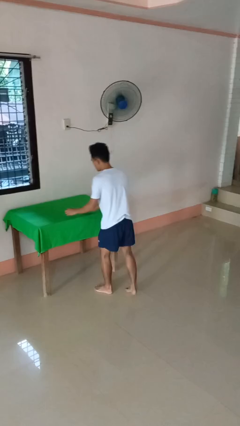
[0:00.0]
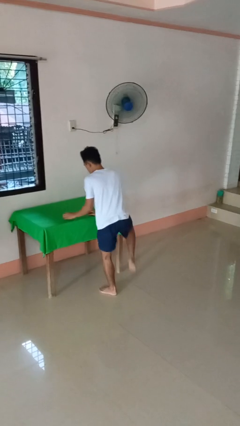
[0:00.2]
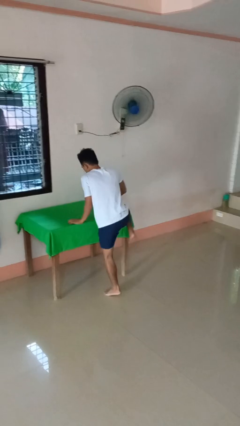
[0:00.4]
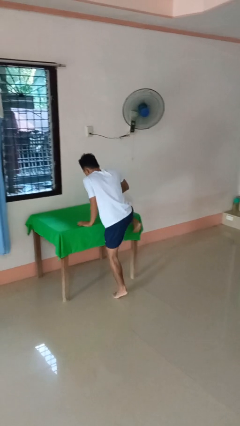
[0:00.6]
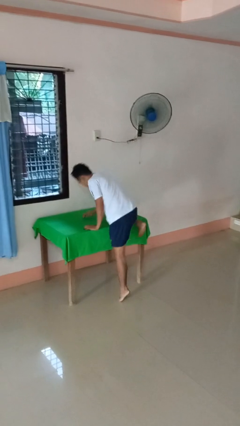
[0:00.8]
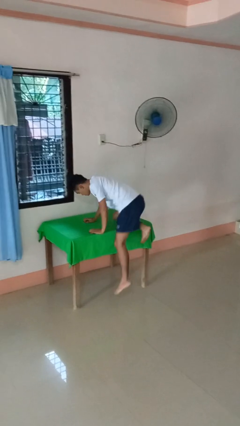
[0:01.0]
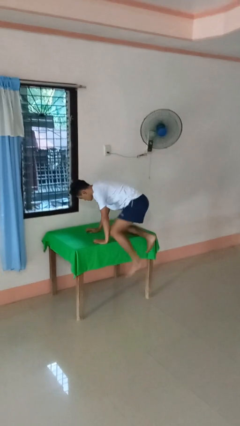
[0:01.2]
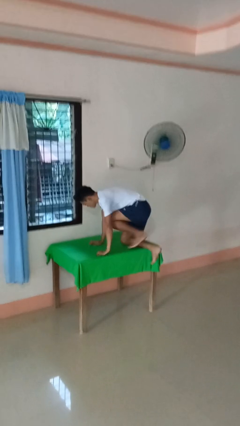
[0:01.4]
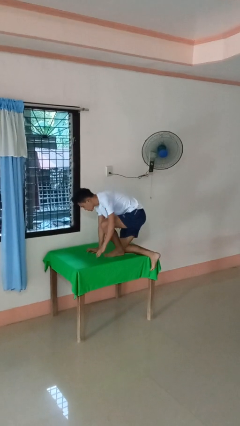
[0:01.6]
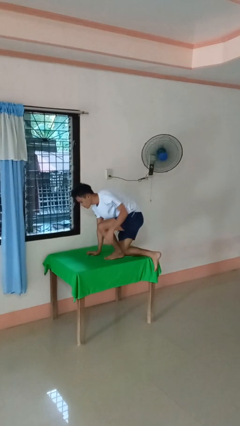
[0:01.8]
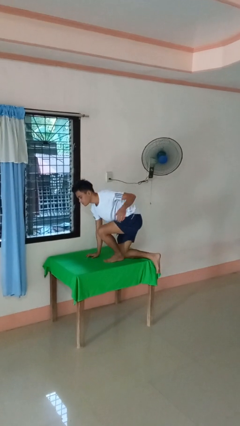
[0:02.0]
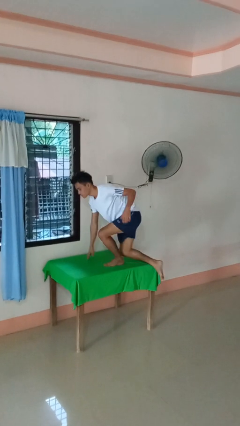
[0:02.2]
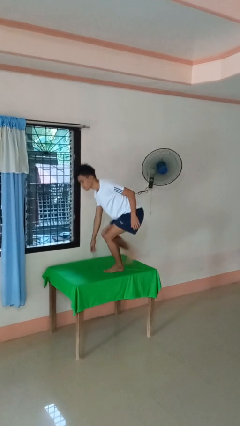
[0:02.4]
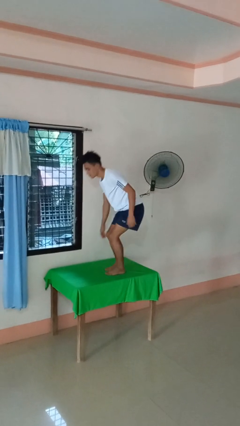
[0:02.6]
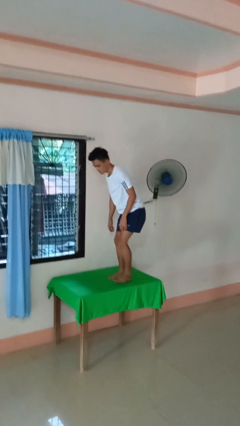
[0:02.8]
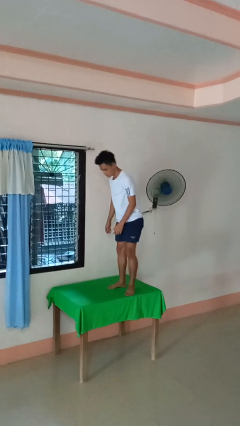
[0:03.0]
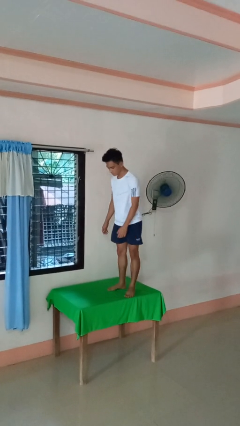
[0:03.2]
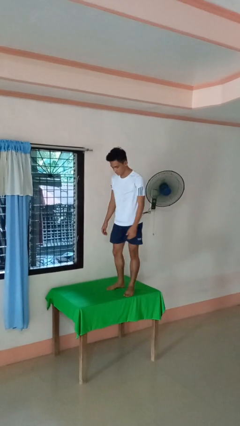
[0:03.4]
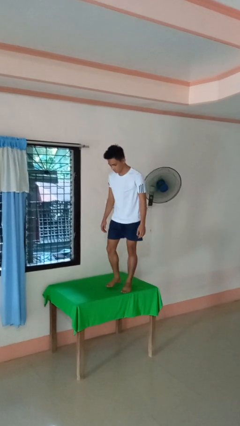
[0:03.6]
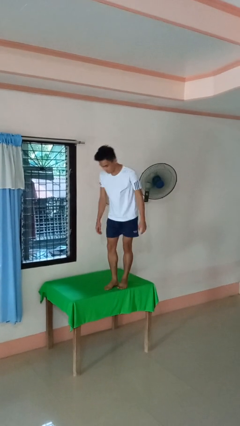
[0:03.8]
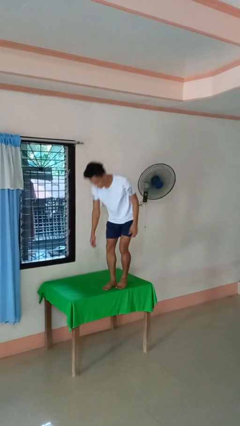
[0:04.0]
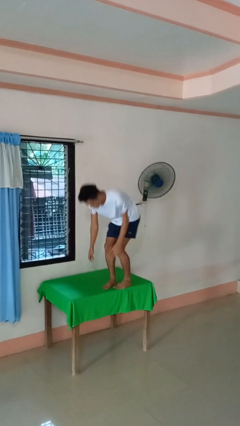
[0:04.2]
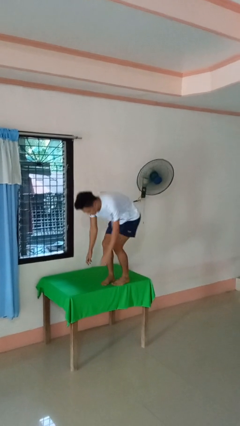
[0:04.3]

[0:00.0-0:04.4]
person climbs on table

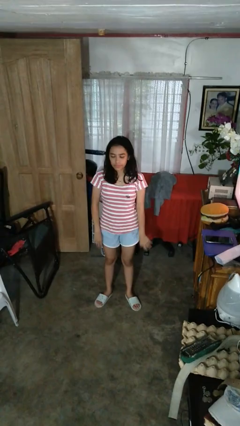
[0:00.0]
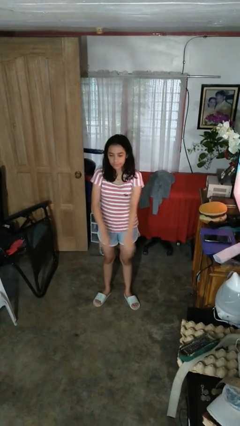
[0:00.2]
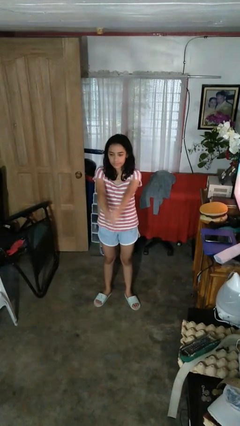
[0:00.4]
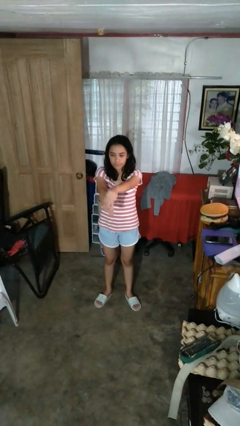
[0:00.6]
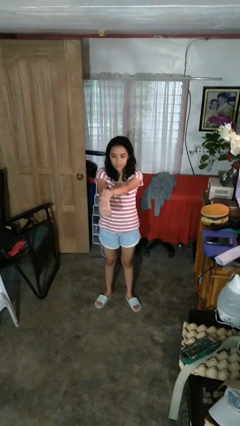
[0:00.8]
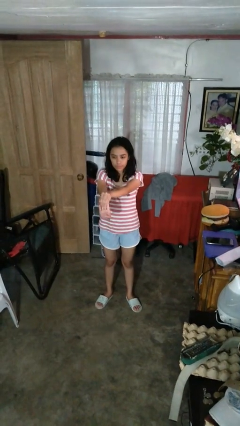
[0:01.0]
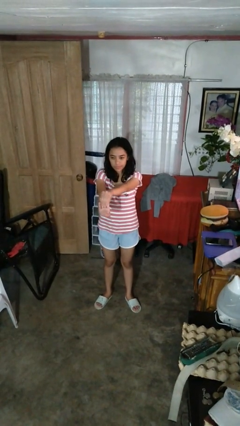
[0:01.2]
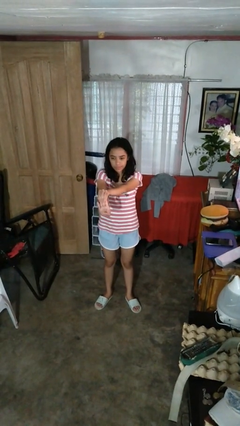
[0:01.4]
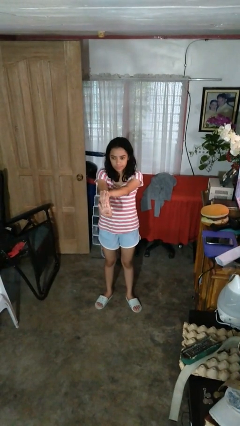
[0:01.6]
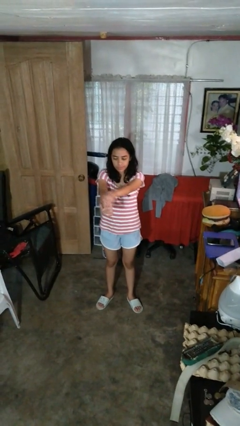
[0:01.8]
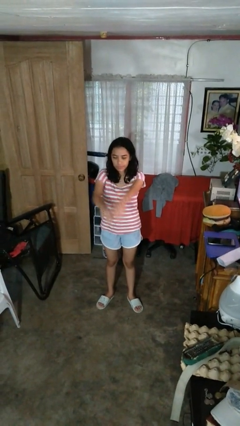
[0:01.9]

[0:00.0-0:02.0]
person cracks knuckles

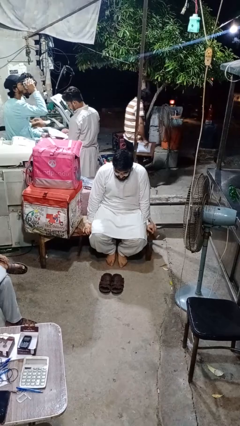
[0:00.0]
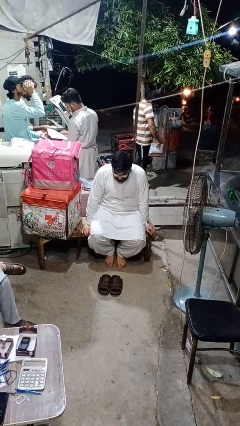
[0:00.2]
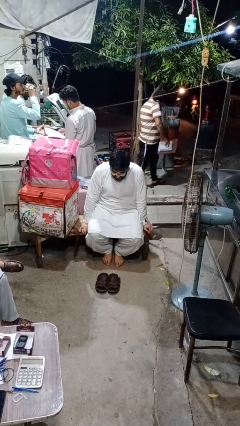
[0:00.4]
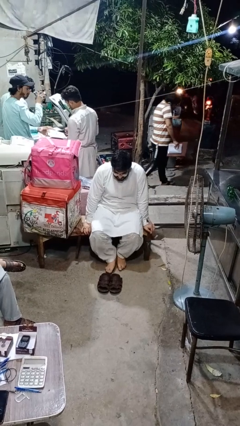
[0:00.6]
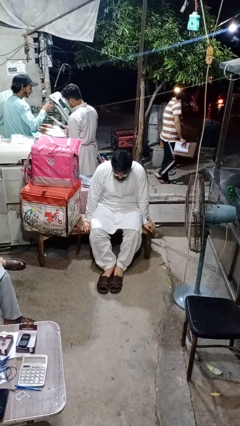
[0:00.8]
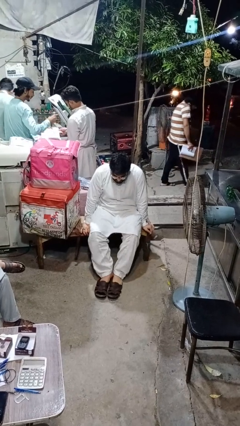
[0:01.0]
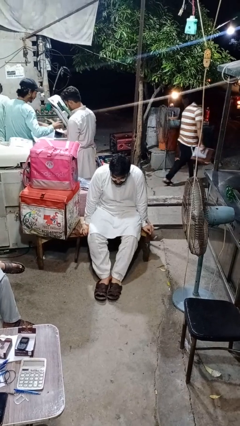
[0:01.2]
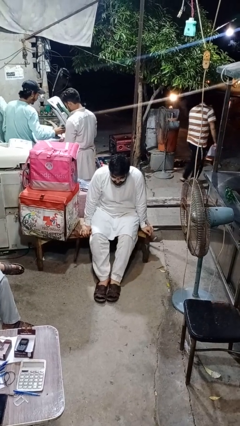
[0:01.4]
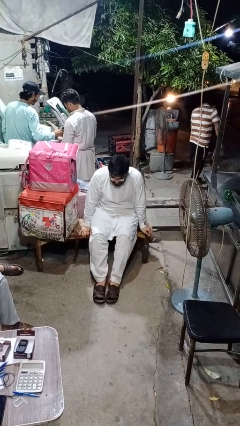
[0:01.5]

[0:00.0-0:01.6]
person puts on shoes

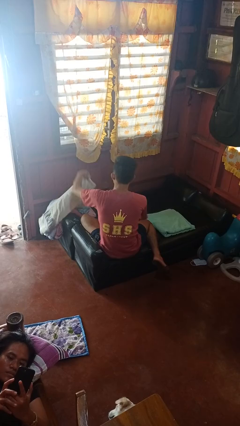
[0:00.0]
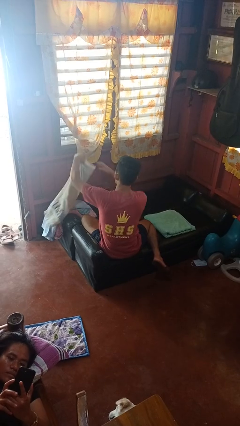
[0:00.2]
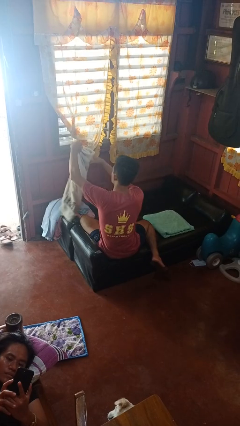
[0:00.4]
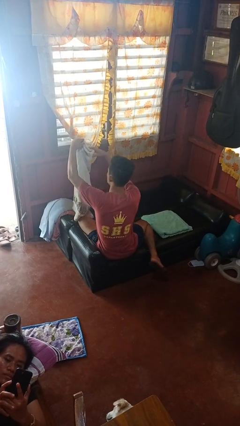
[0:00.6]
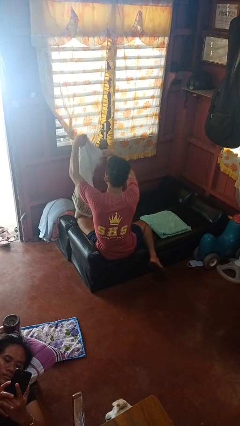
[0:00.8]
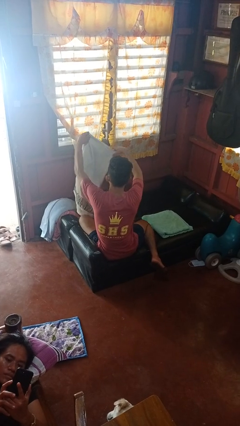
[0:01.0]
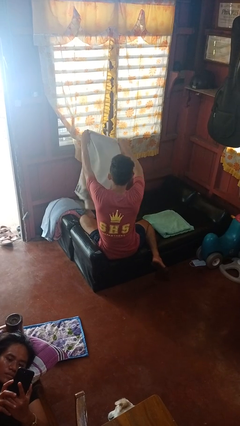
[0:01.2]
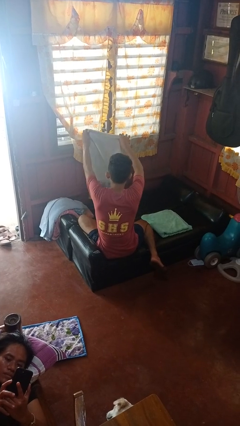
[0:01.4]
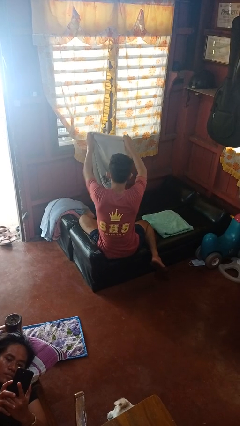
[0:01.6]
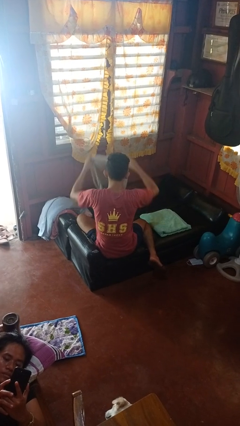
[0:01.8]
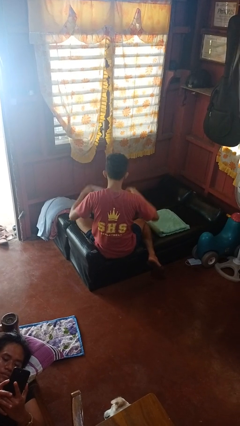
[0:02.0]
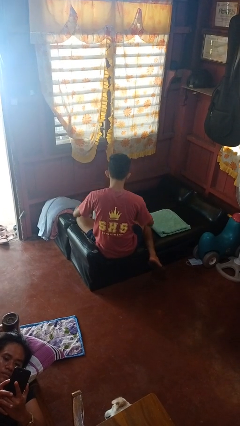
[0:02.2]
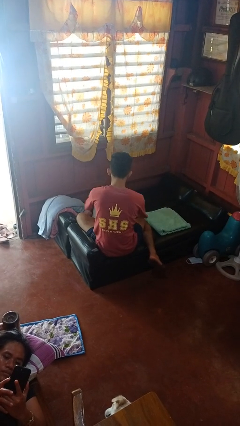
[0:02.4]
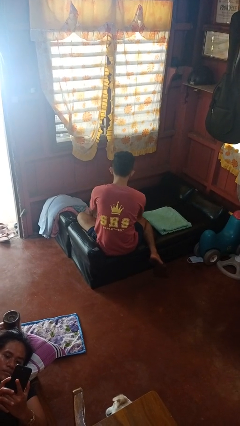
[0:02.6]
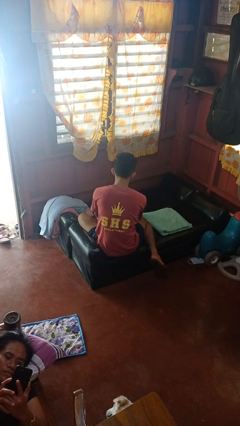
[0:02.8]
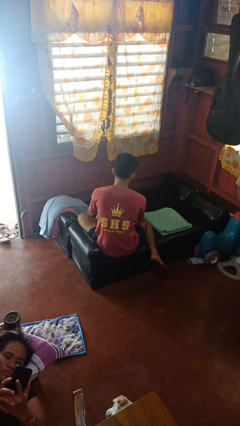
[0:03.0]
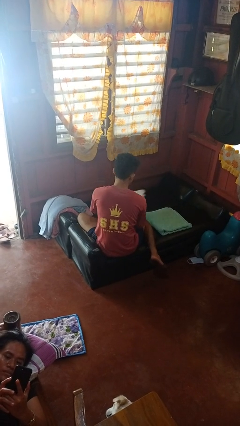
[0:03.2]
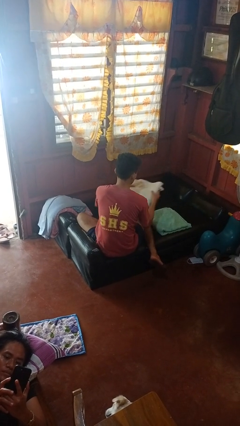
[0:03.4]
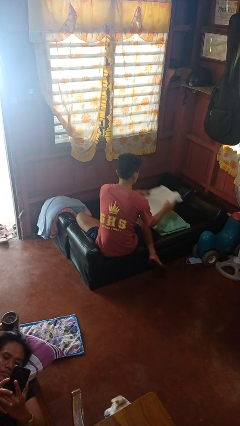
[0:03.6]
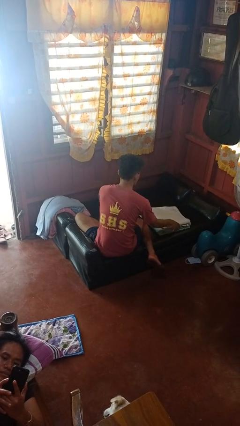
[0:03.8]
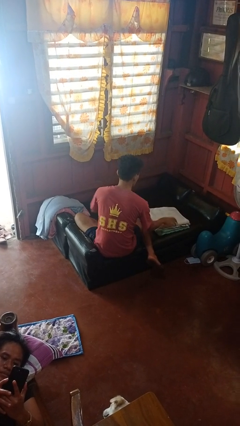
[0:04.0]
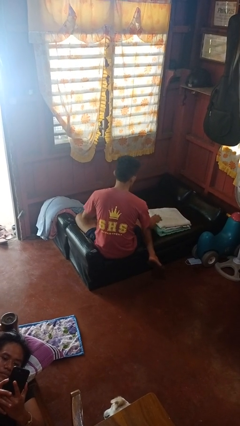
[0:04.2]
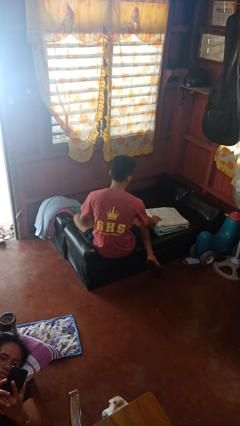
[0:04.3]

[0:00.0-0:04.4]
person folds towel

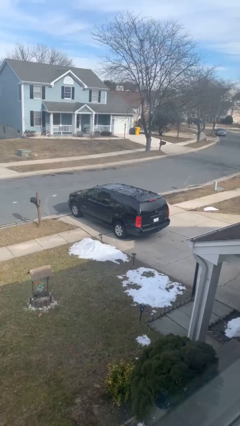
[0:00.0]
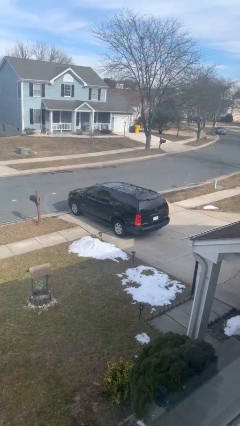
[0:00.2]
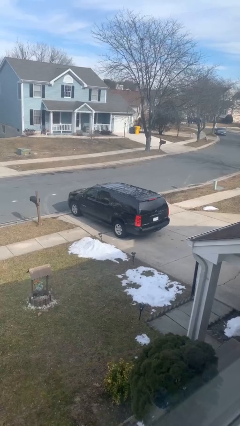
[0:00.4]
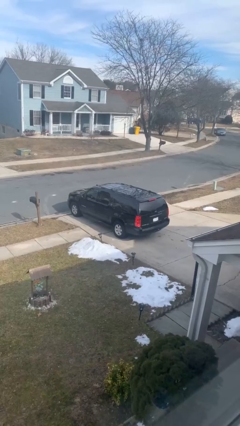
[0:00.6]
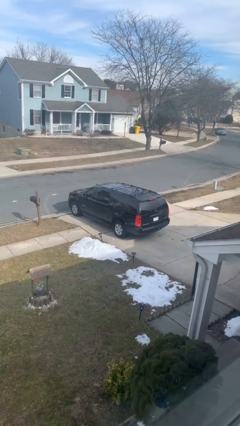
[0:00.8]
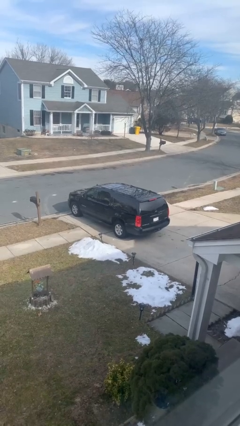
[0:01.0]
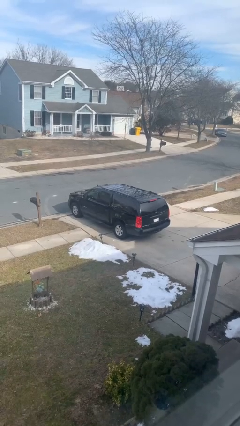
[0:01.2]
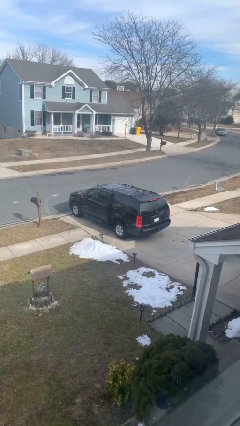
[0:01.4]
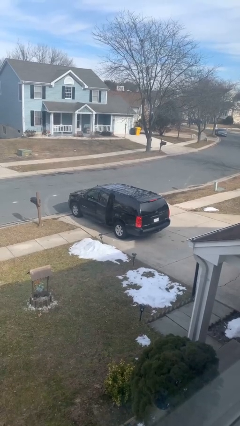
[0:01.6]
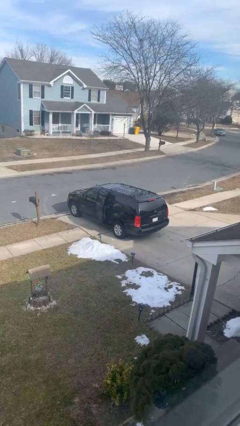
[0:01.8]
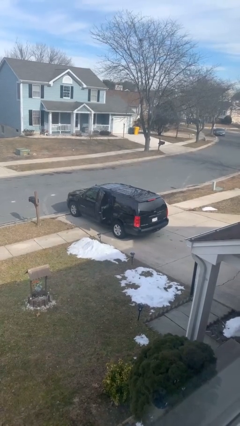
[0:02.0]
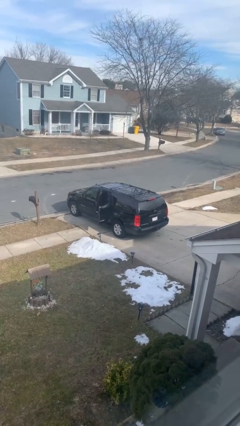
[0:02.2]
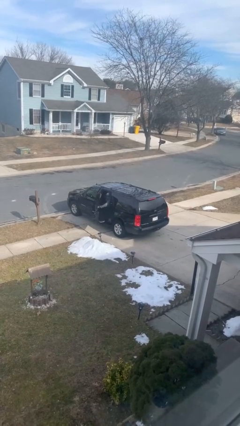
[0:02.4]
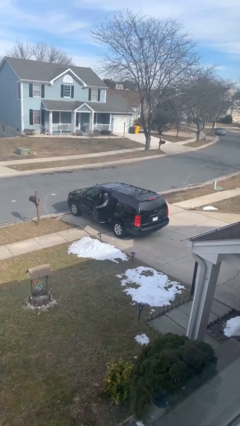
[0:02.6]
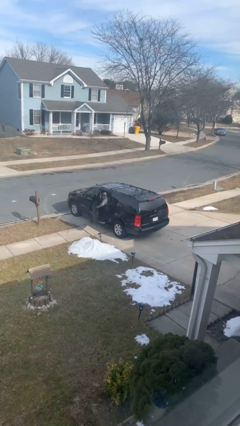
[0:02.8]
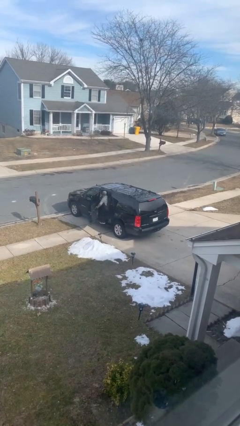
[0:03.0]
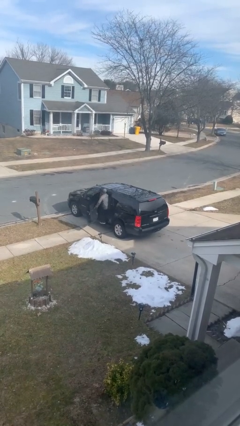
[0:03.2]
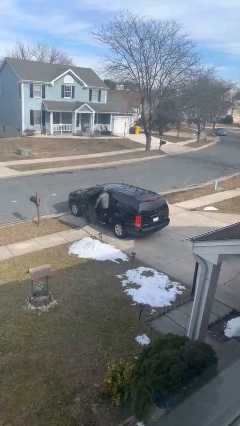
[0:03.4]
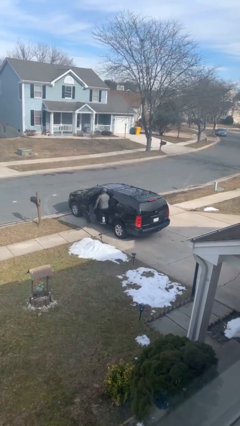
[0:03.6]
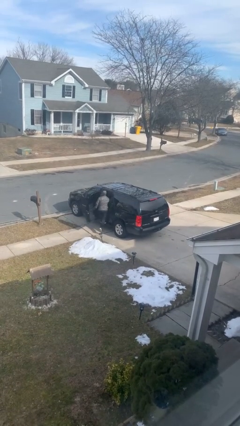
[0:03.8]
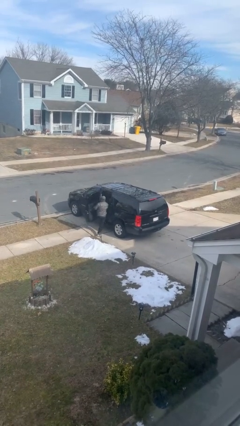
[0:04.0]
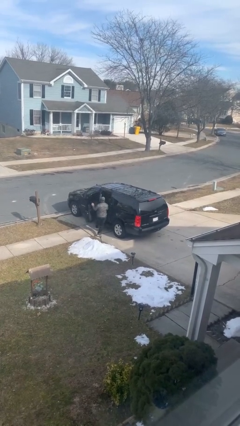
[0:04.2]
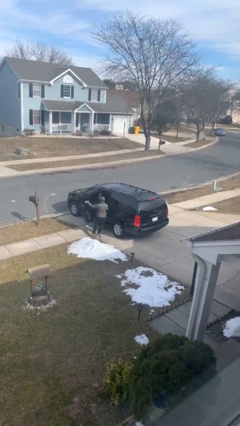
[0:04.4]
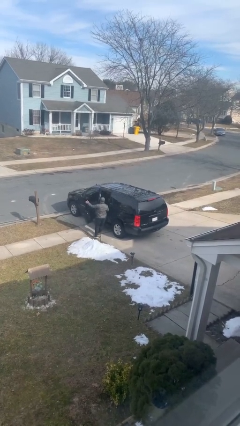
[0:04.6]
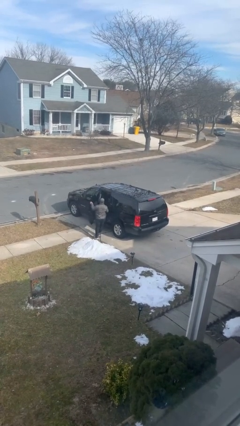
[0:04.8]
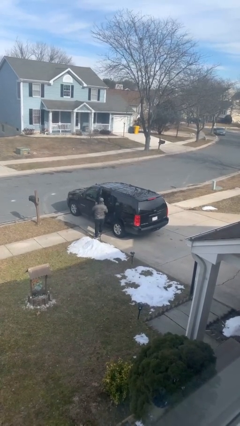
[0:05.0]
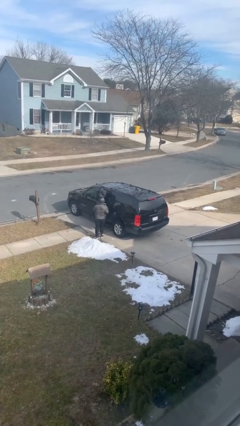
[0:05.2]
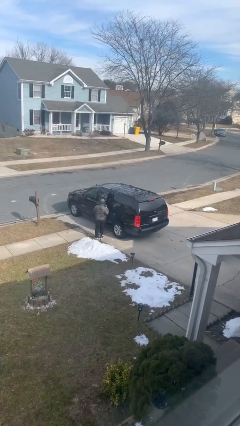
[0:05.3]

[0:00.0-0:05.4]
car drops off person
